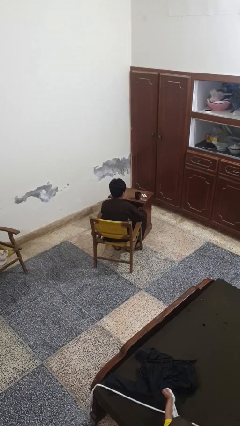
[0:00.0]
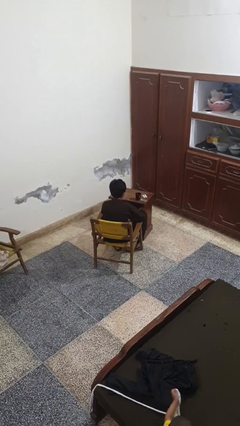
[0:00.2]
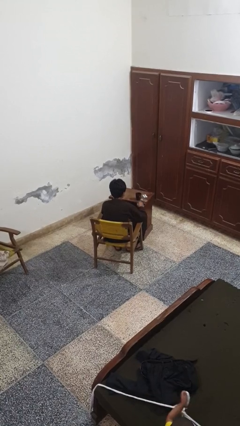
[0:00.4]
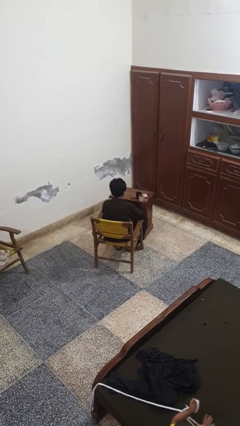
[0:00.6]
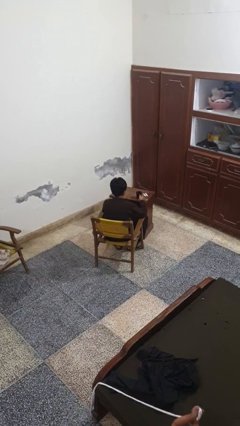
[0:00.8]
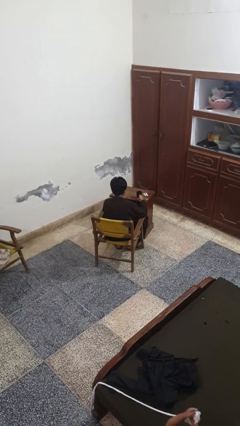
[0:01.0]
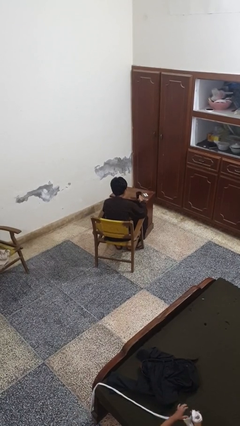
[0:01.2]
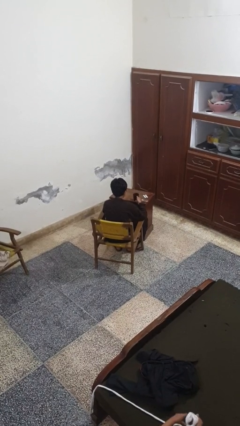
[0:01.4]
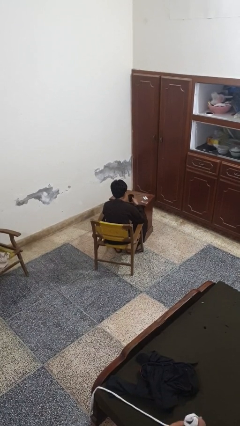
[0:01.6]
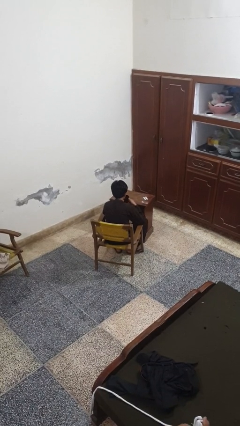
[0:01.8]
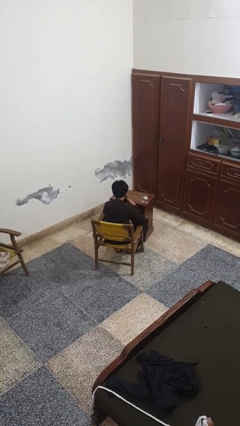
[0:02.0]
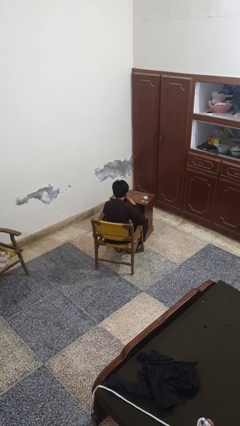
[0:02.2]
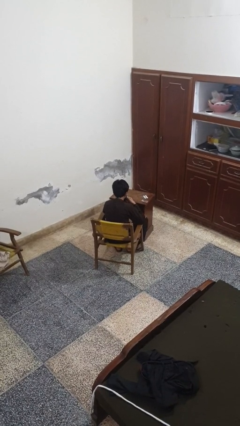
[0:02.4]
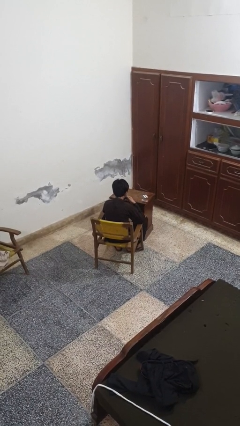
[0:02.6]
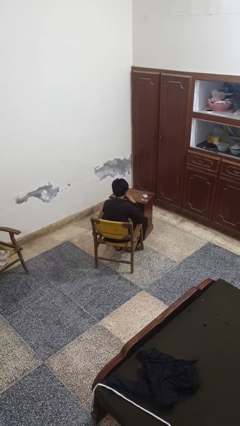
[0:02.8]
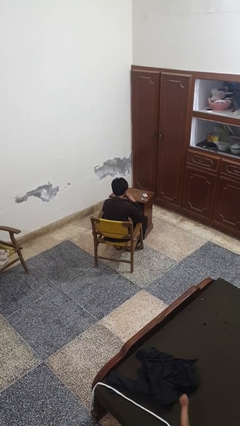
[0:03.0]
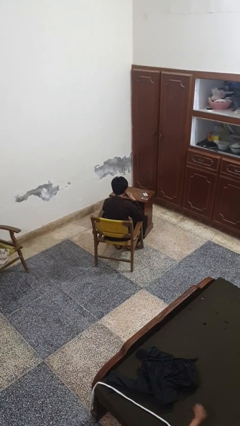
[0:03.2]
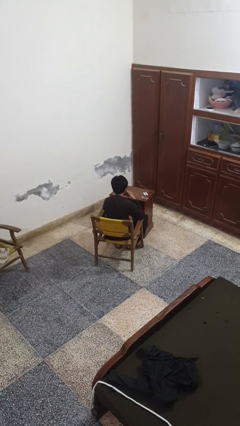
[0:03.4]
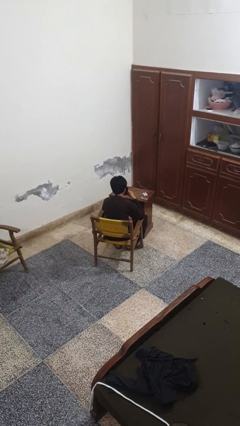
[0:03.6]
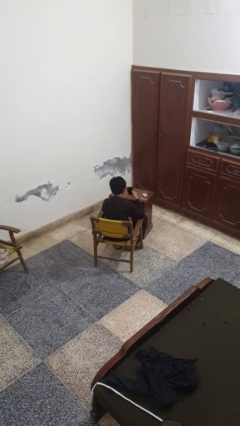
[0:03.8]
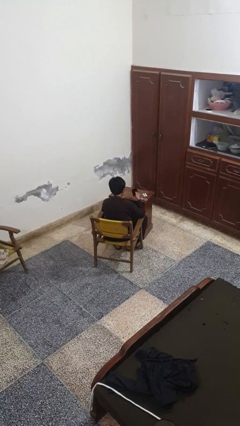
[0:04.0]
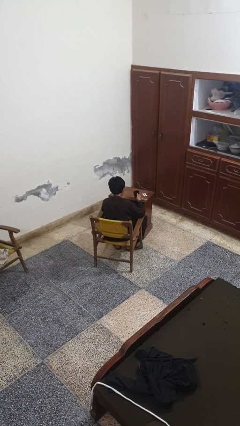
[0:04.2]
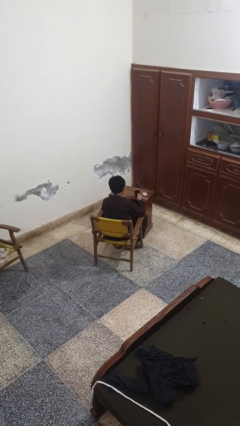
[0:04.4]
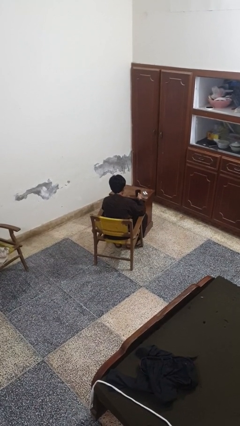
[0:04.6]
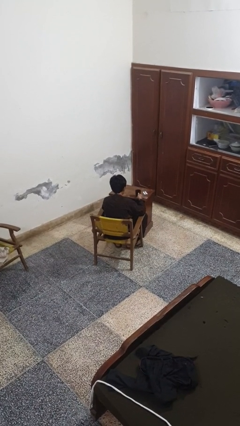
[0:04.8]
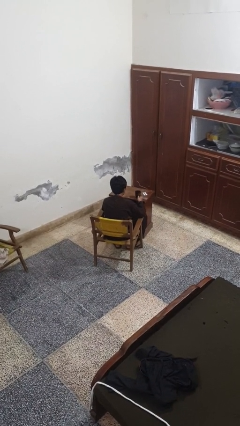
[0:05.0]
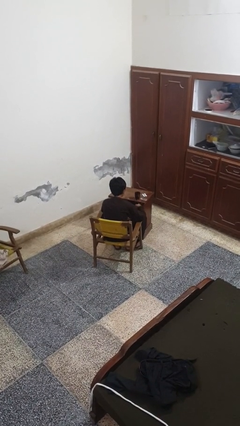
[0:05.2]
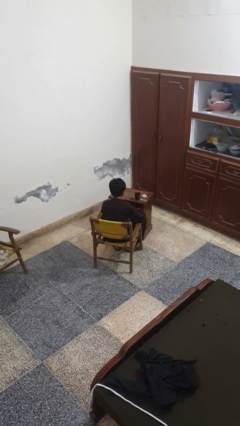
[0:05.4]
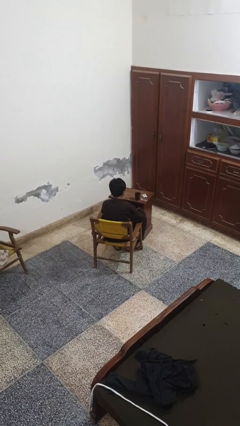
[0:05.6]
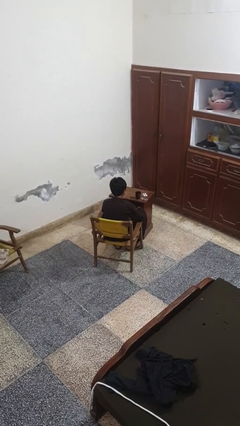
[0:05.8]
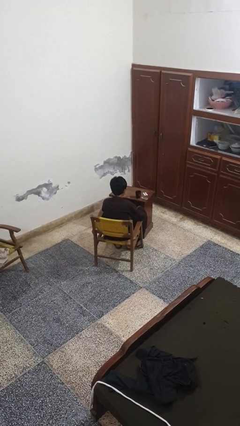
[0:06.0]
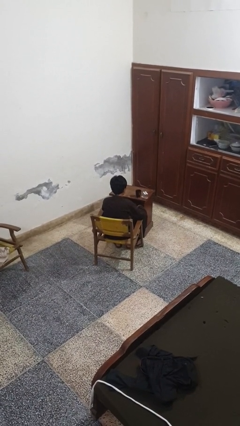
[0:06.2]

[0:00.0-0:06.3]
person drinks from cup

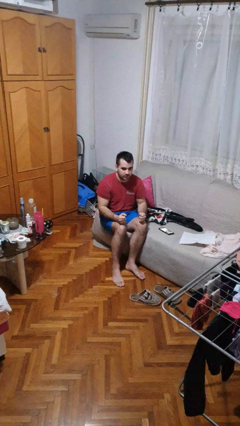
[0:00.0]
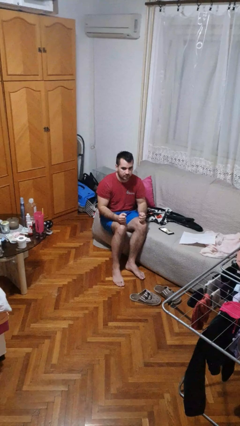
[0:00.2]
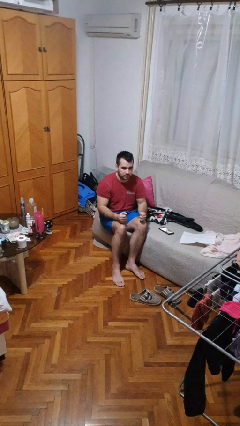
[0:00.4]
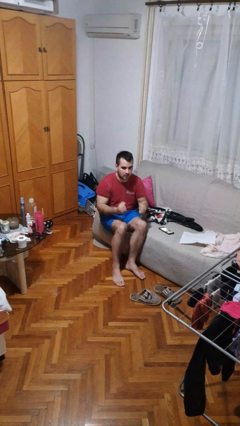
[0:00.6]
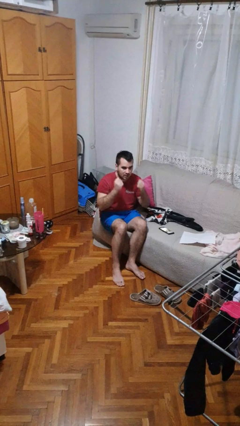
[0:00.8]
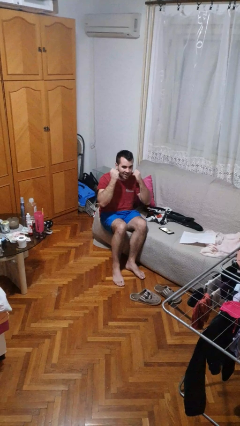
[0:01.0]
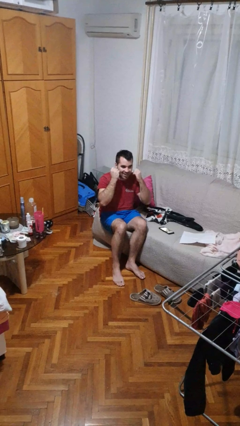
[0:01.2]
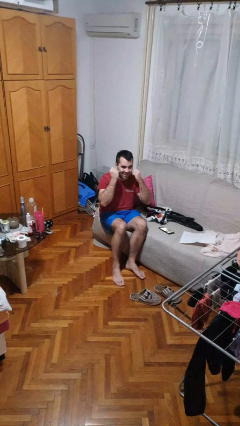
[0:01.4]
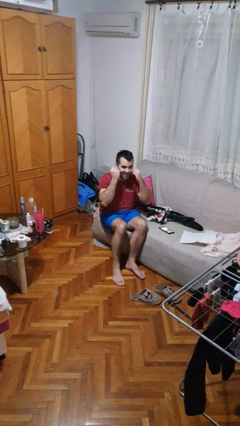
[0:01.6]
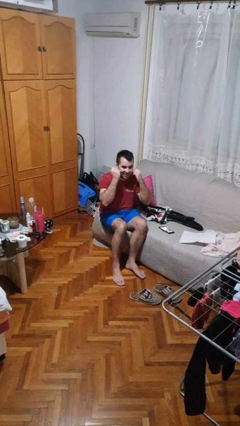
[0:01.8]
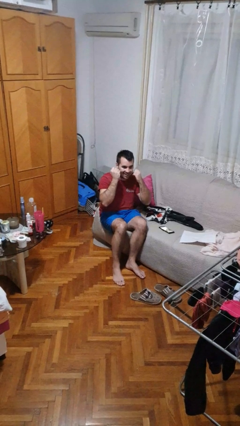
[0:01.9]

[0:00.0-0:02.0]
person flosses

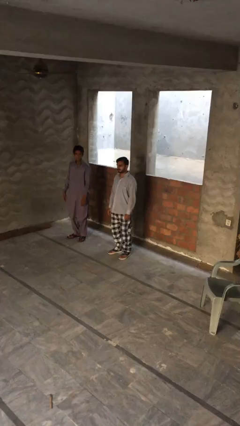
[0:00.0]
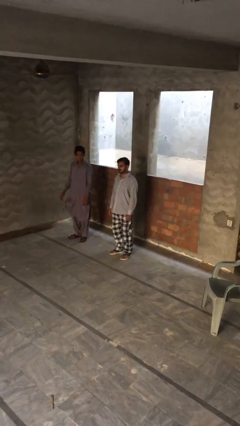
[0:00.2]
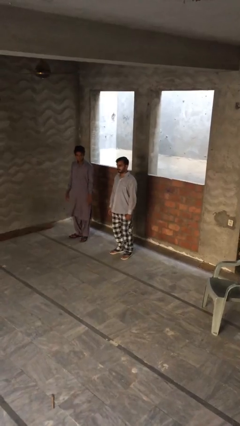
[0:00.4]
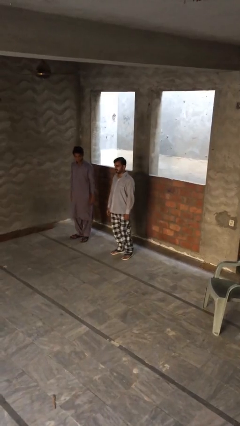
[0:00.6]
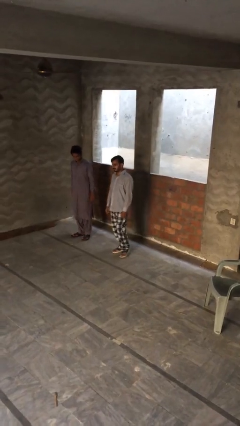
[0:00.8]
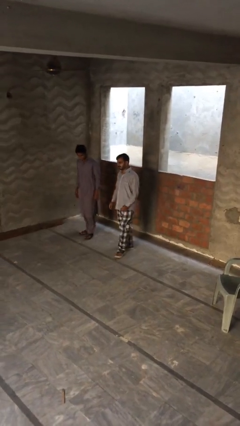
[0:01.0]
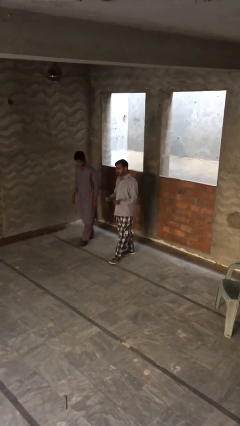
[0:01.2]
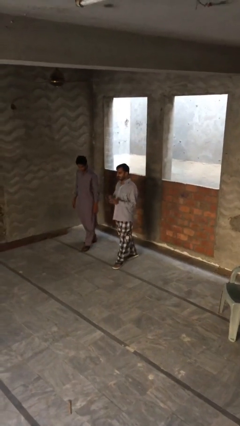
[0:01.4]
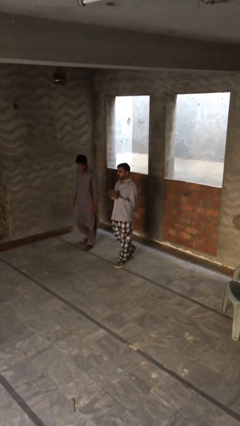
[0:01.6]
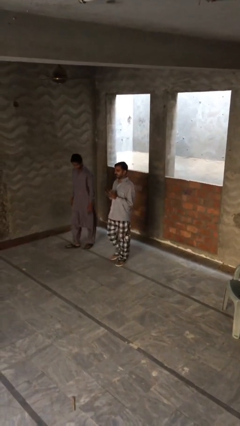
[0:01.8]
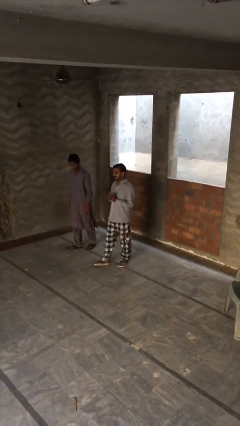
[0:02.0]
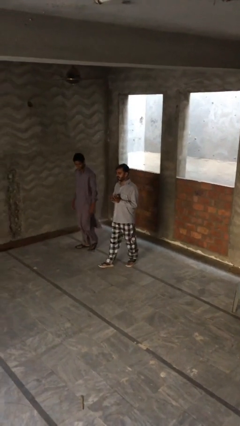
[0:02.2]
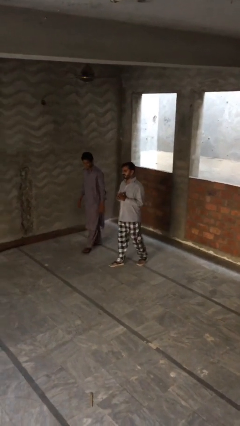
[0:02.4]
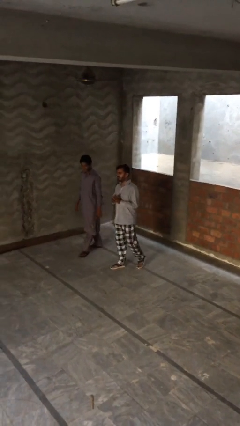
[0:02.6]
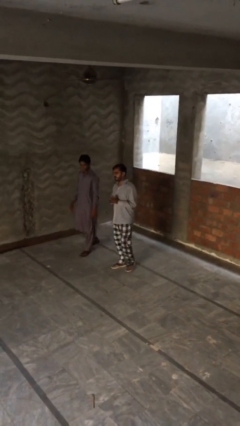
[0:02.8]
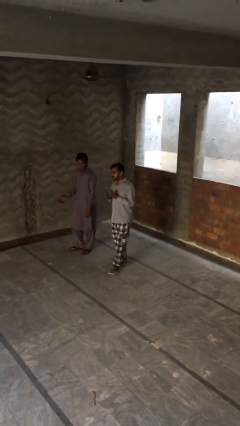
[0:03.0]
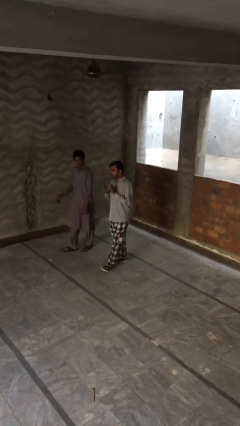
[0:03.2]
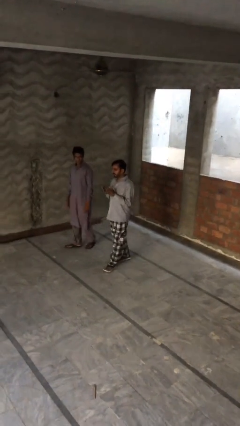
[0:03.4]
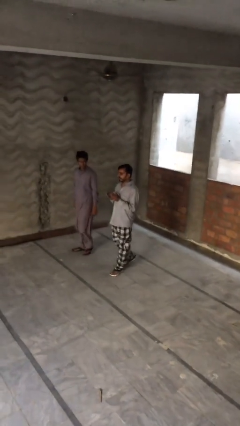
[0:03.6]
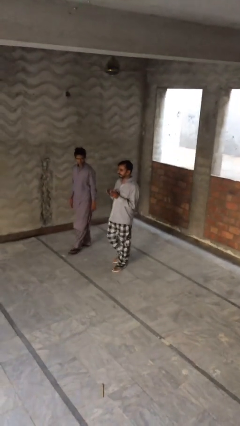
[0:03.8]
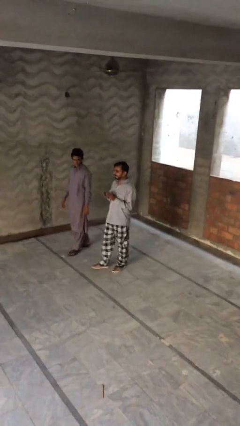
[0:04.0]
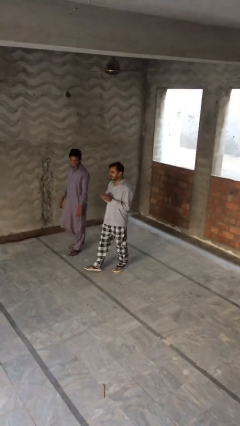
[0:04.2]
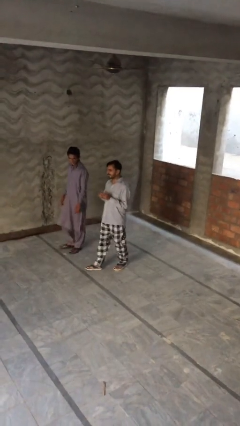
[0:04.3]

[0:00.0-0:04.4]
person talks to person

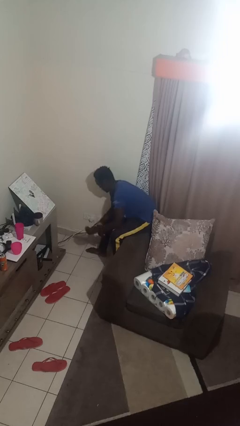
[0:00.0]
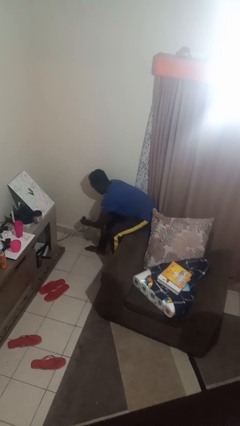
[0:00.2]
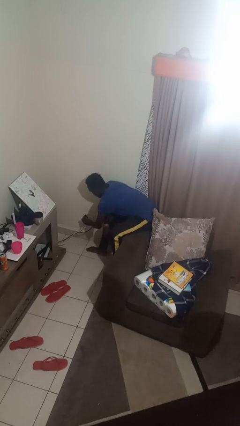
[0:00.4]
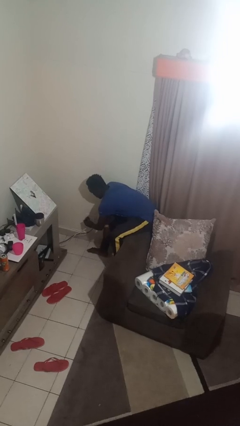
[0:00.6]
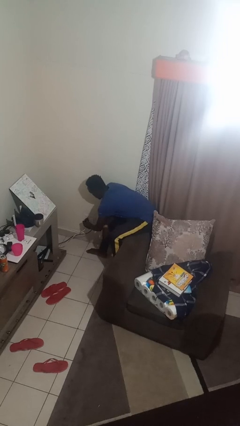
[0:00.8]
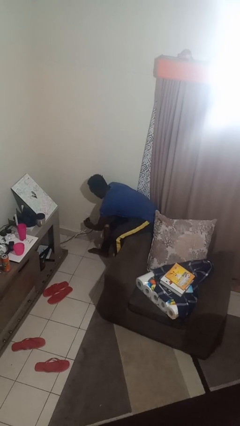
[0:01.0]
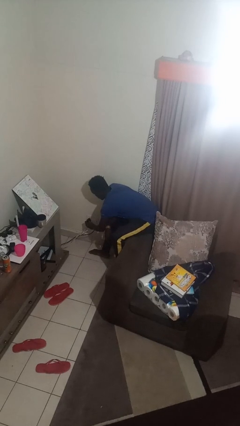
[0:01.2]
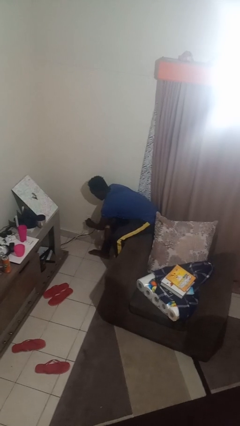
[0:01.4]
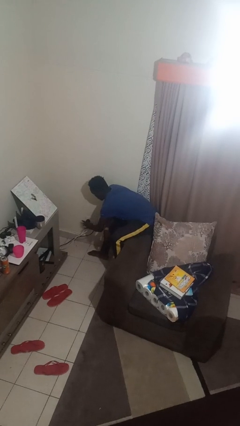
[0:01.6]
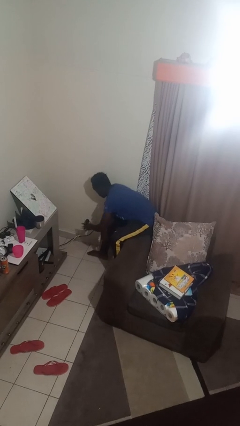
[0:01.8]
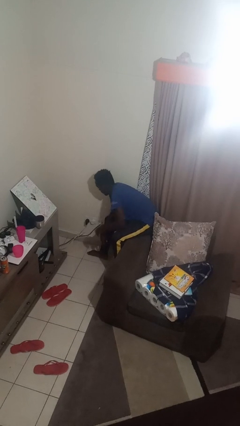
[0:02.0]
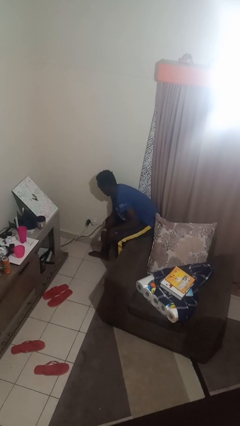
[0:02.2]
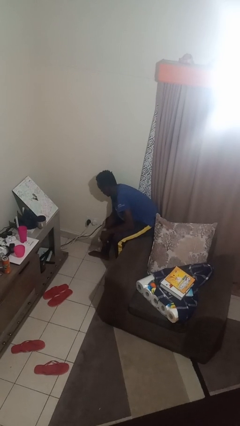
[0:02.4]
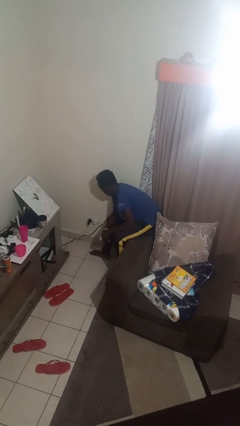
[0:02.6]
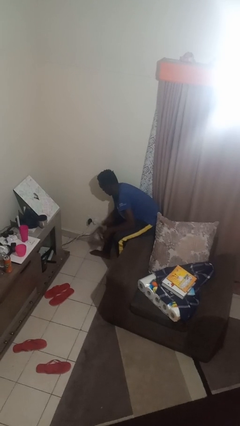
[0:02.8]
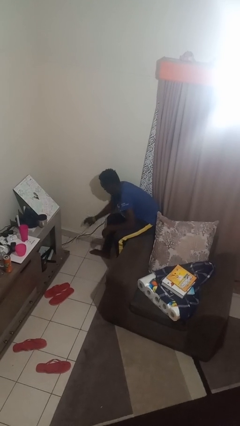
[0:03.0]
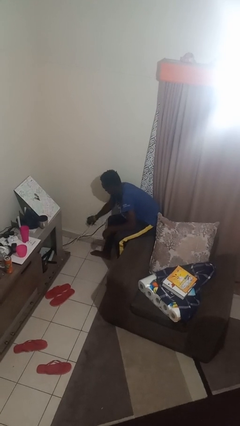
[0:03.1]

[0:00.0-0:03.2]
person plugs into electrical socket

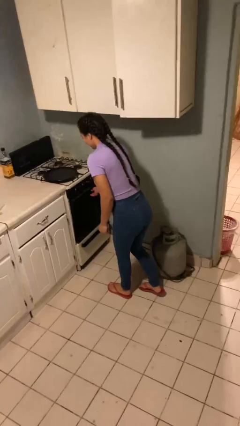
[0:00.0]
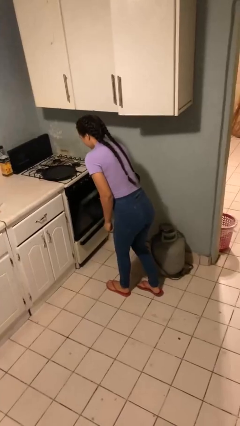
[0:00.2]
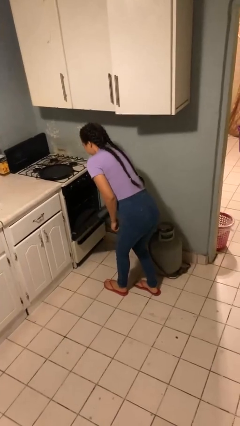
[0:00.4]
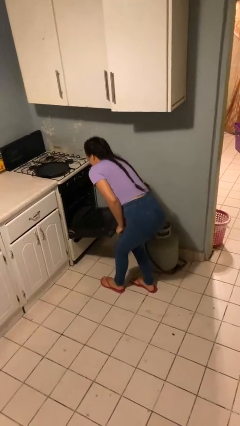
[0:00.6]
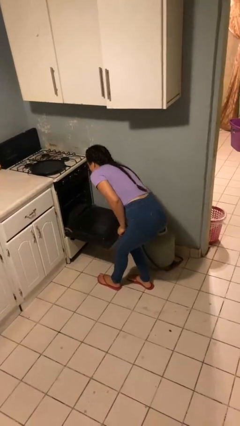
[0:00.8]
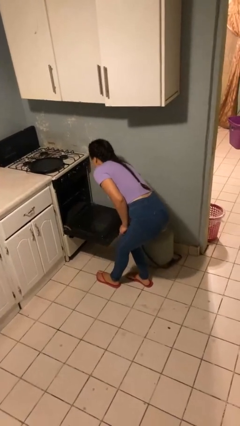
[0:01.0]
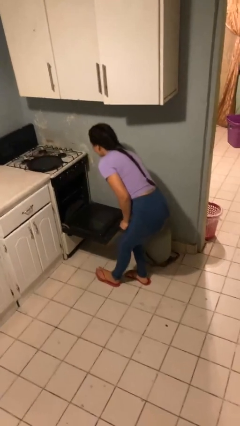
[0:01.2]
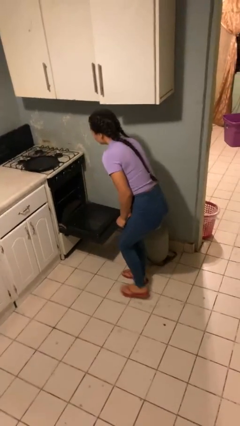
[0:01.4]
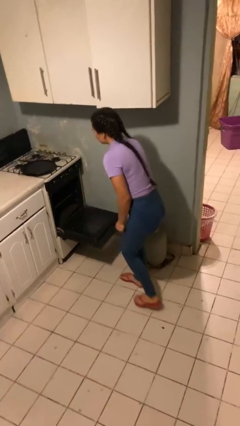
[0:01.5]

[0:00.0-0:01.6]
person opens oven door

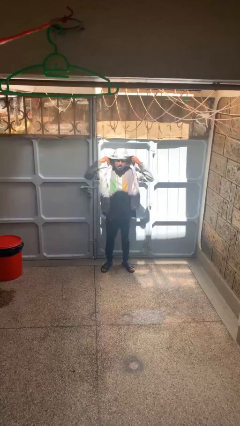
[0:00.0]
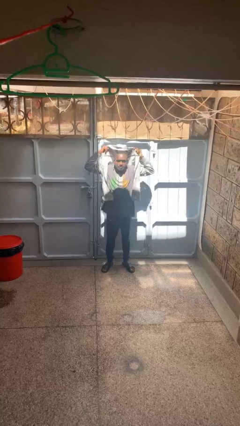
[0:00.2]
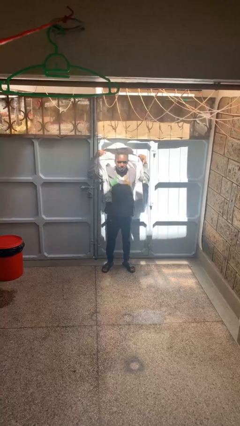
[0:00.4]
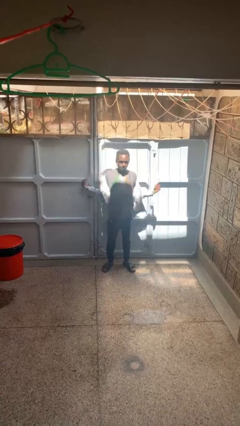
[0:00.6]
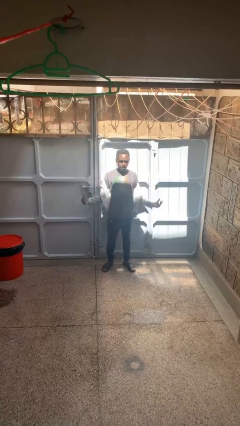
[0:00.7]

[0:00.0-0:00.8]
person takes off hoodie
